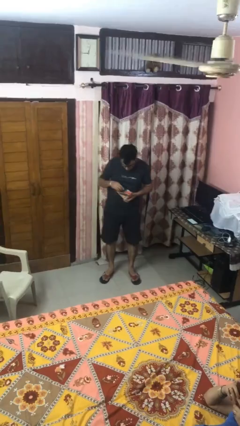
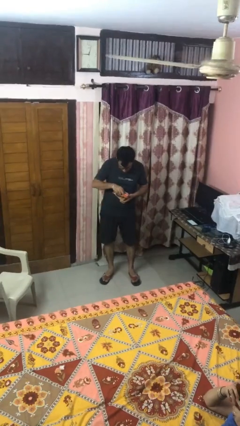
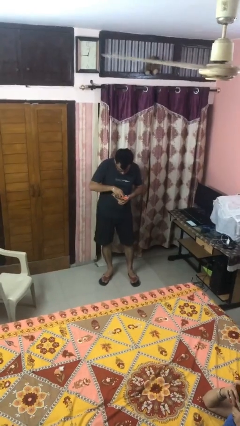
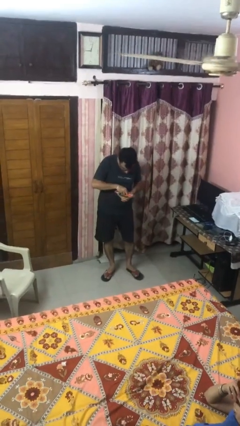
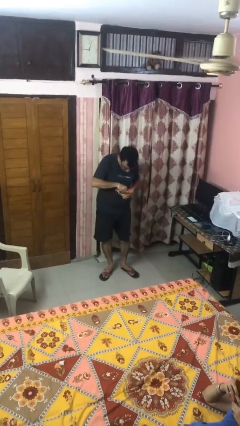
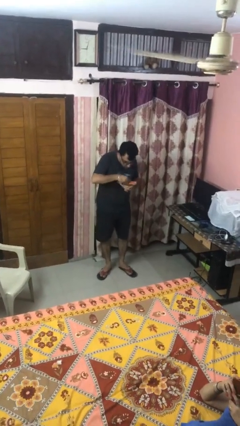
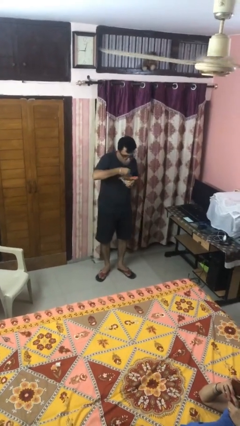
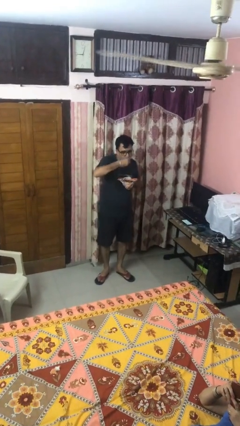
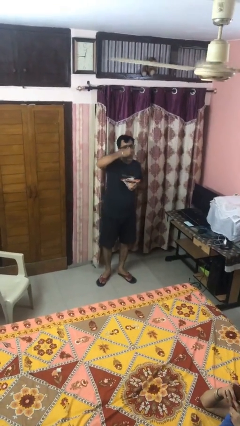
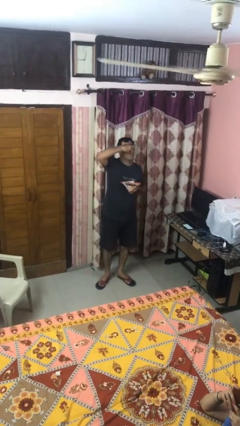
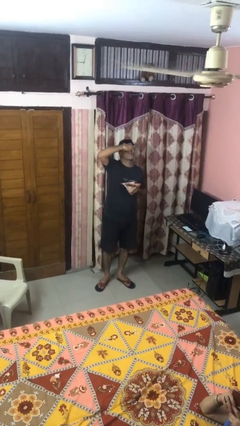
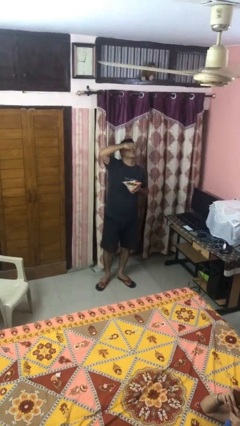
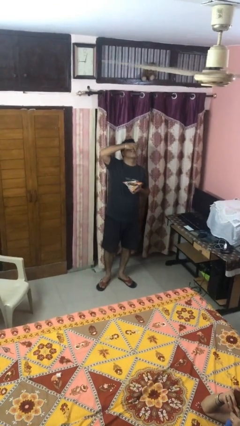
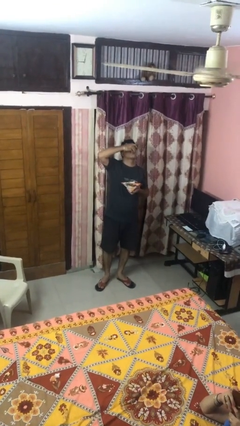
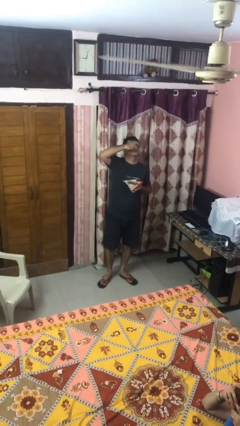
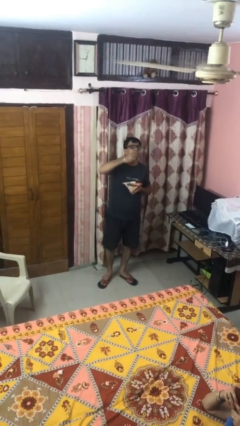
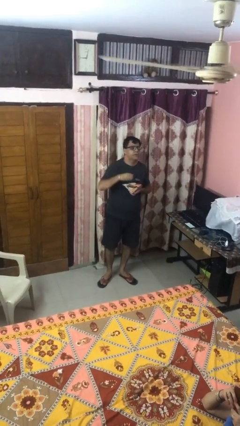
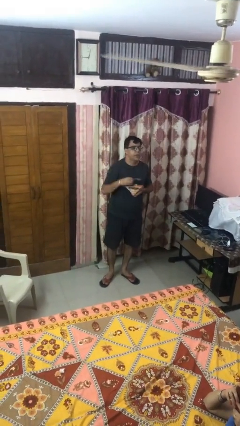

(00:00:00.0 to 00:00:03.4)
person eats snack from bag

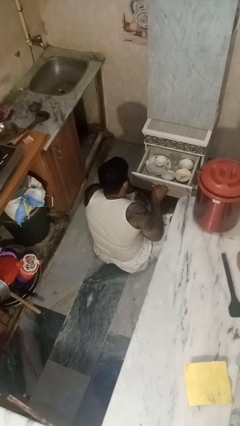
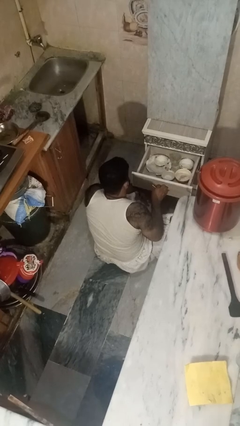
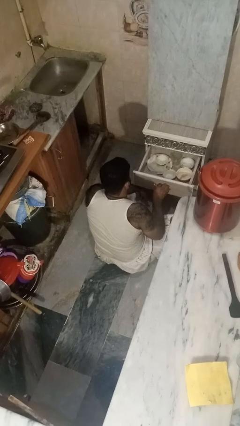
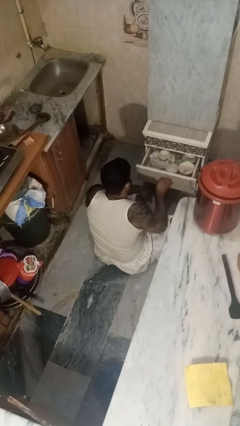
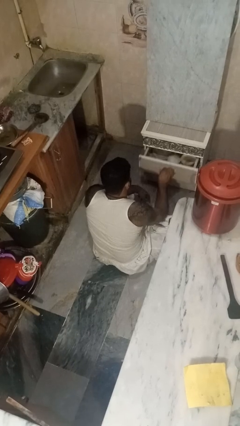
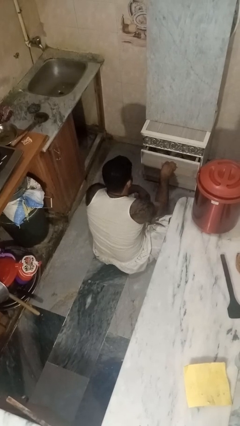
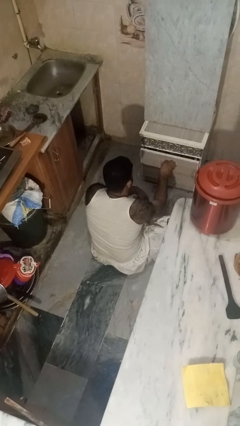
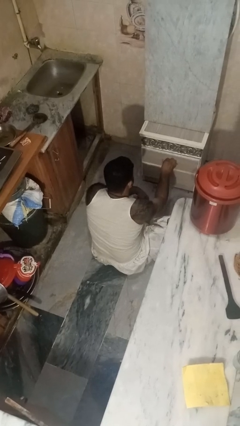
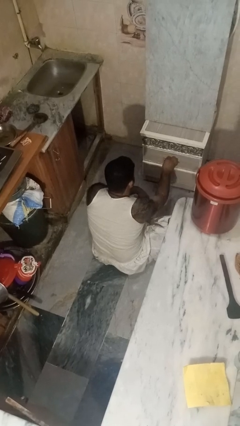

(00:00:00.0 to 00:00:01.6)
person closes kitchen drawer

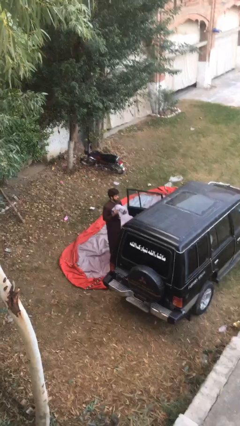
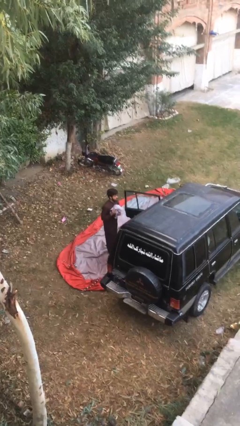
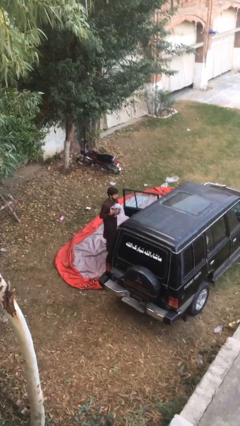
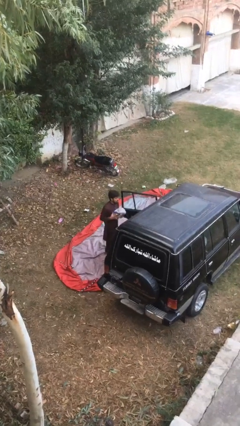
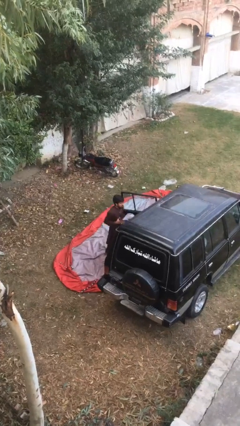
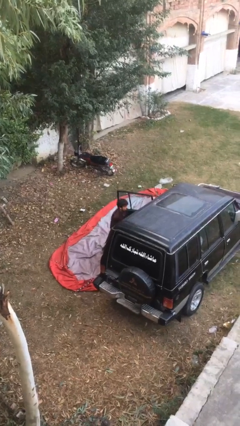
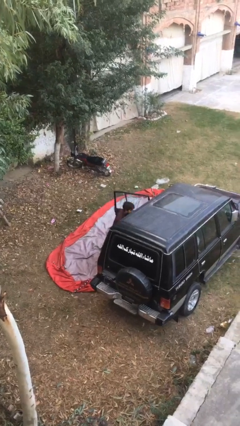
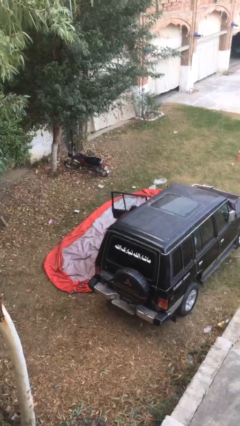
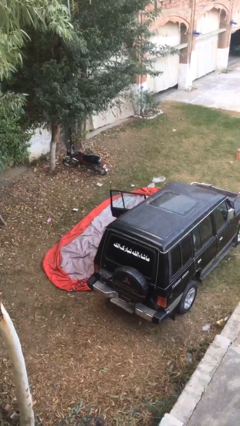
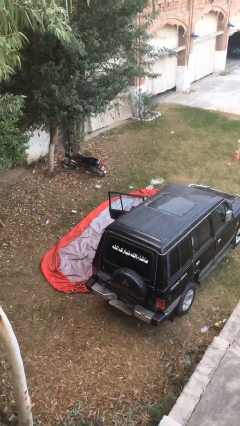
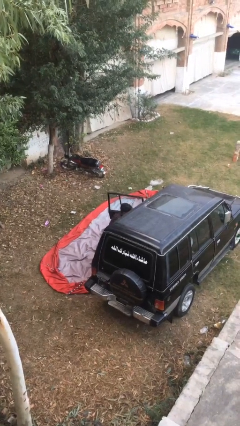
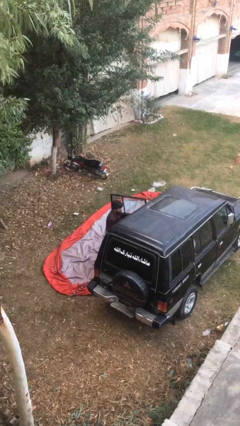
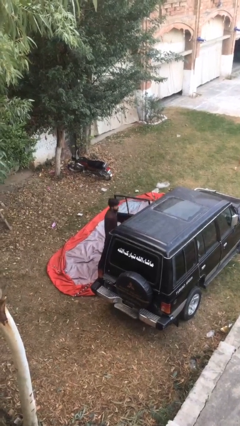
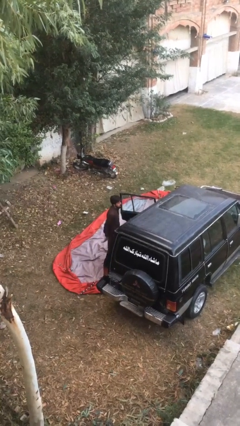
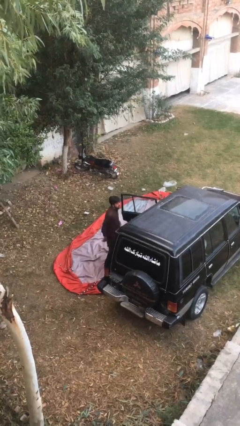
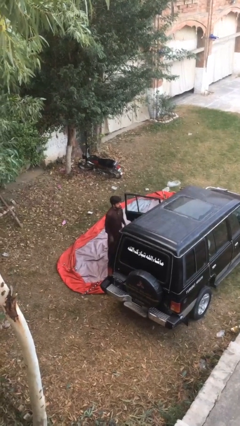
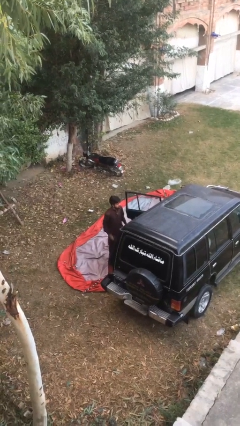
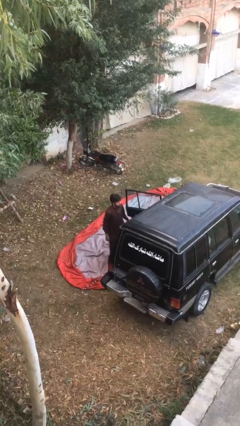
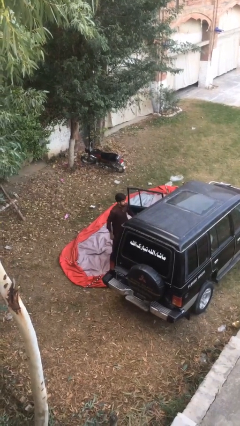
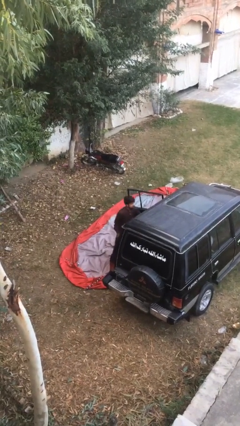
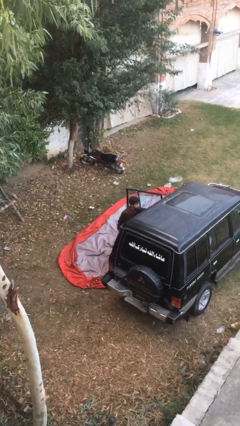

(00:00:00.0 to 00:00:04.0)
person loads car

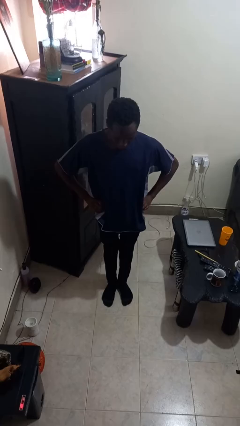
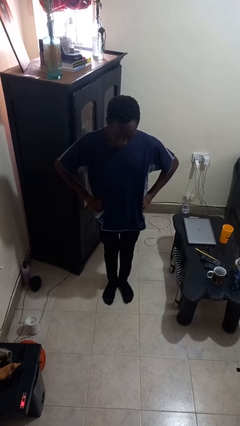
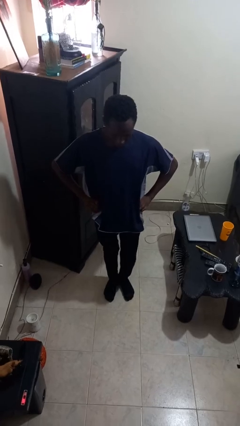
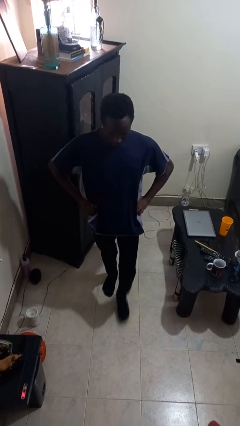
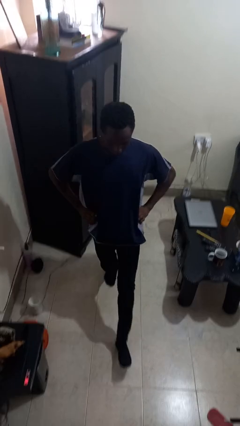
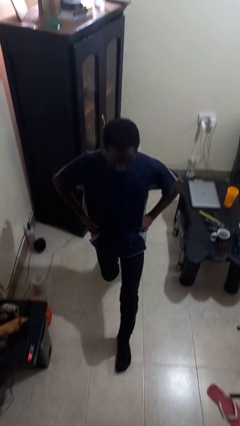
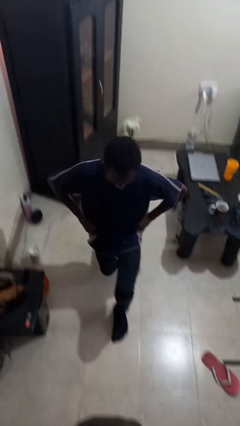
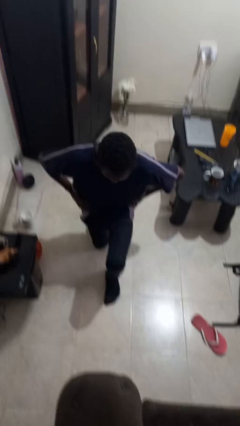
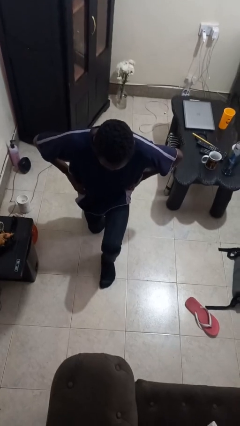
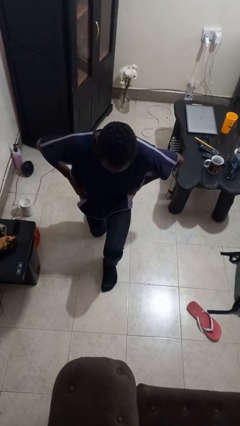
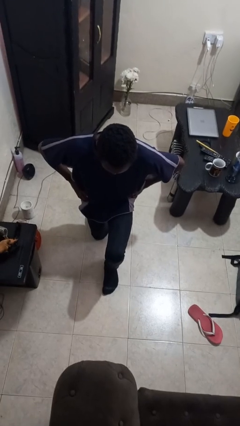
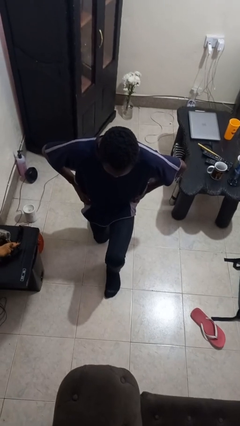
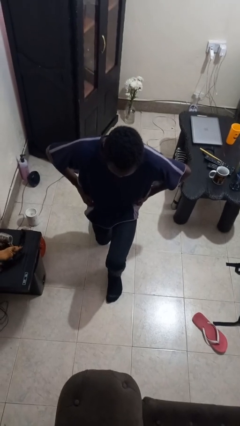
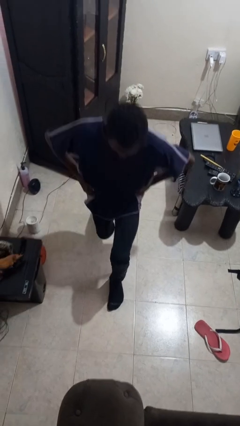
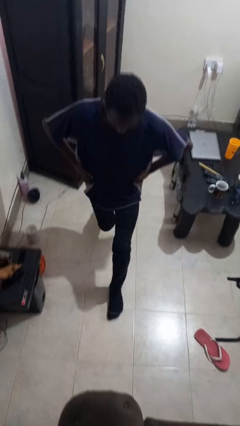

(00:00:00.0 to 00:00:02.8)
person exercises with lunges

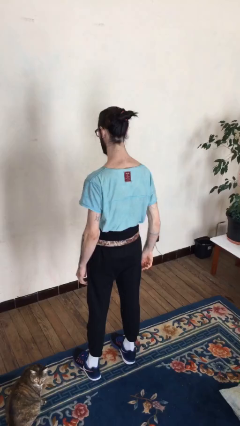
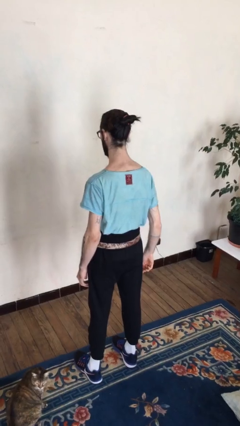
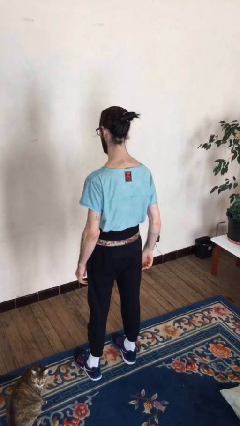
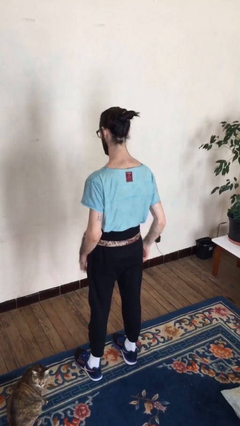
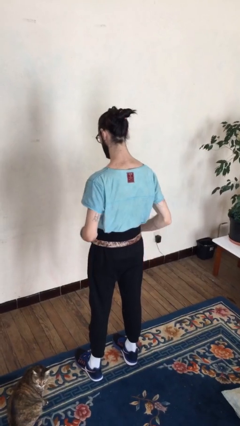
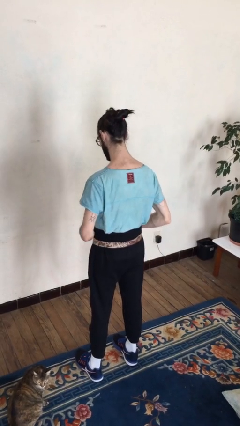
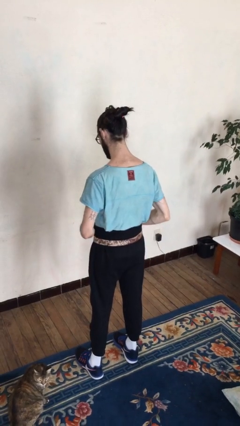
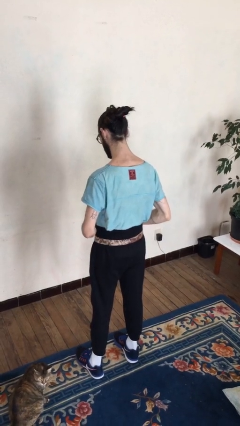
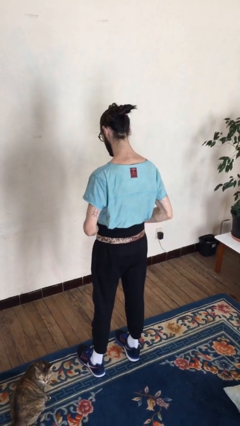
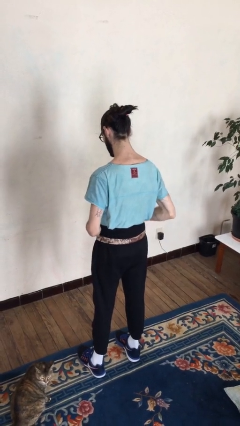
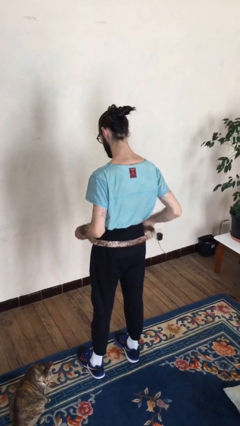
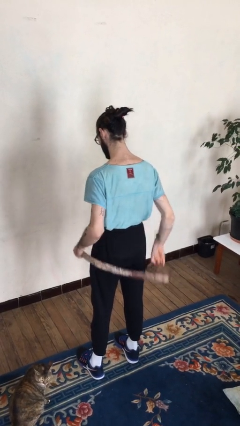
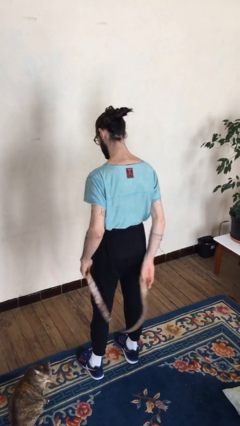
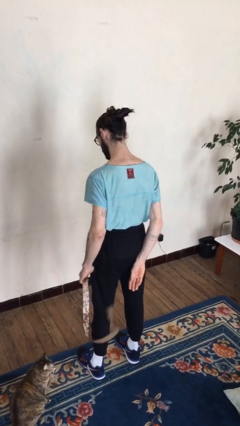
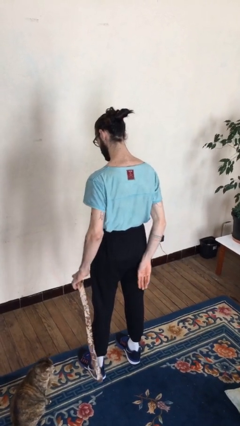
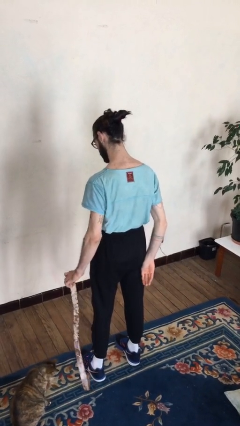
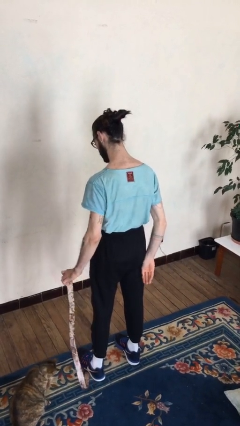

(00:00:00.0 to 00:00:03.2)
person takes off belt

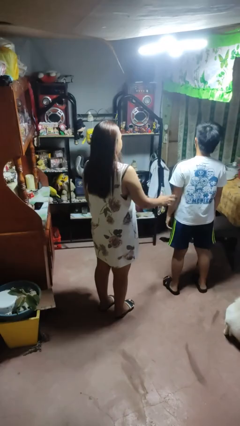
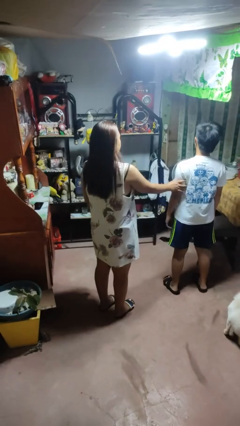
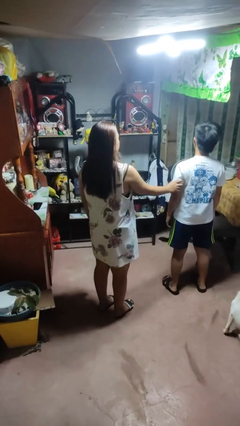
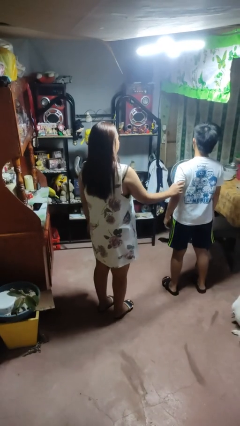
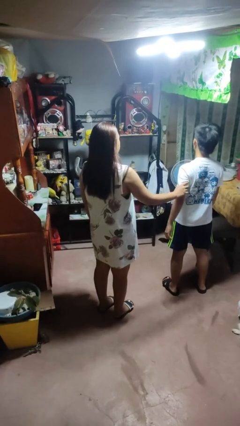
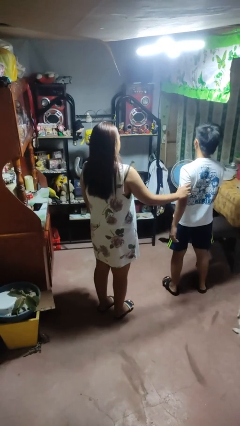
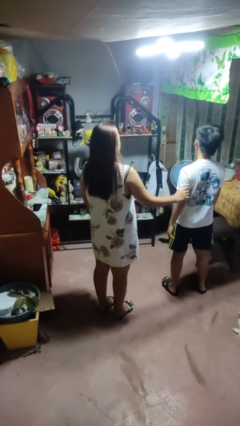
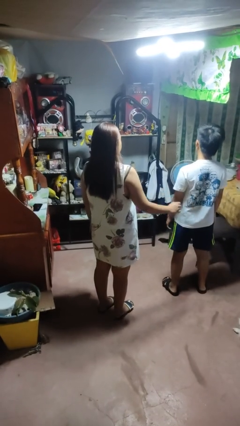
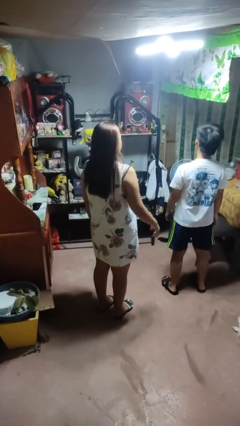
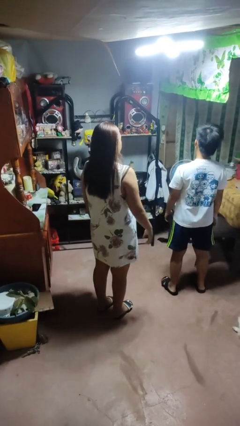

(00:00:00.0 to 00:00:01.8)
person grabs person by bicep

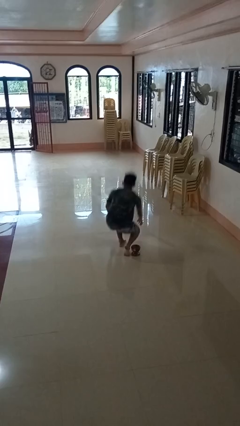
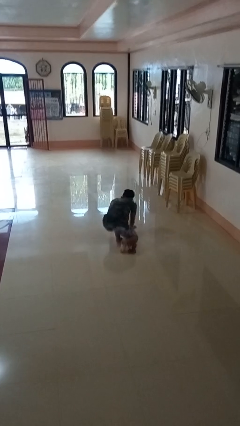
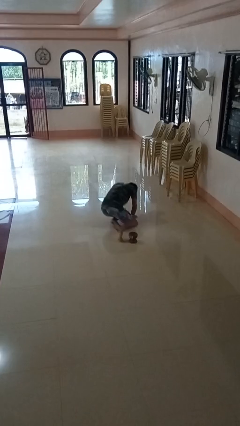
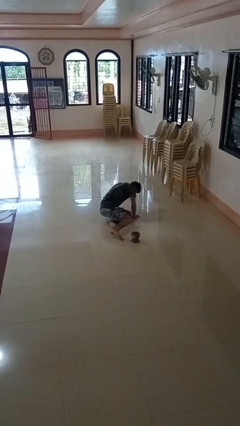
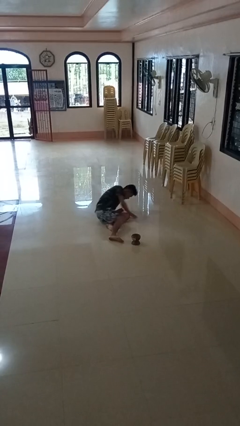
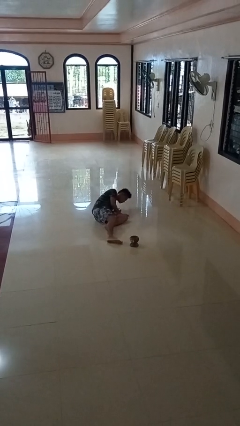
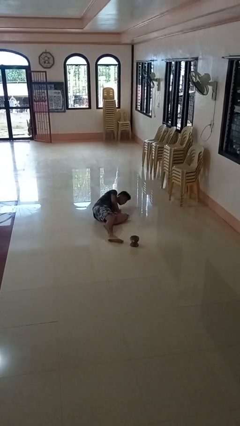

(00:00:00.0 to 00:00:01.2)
person trips on object on floor
